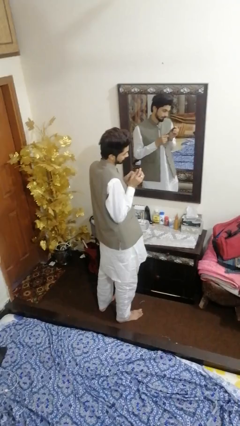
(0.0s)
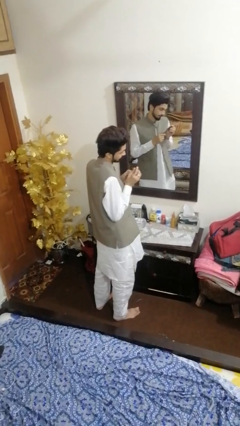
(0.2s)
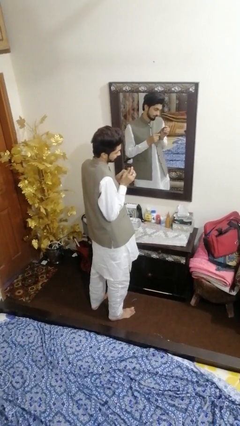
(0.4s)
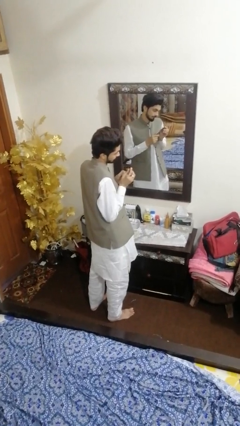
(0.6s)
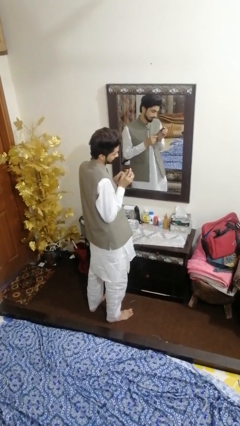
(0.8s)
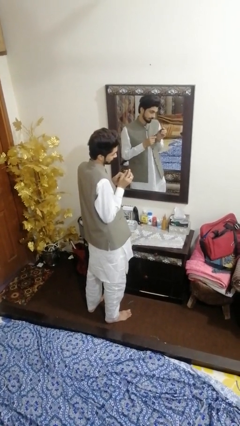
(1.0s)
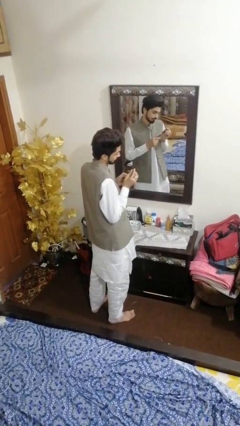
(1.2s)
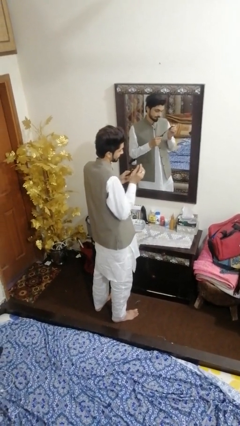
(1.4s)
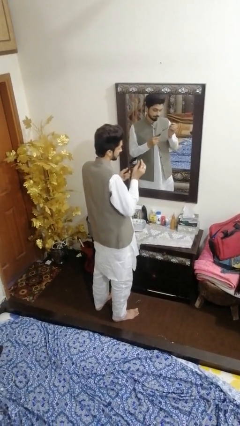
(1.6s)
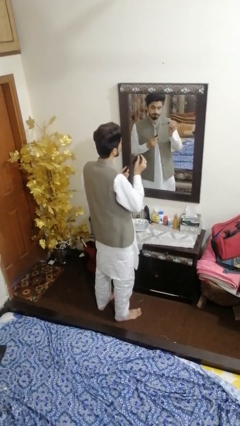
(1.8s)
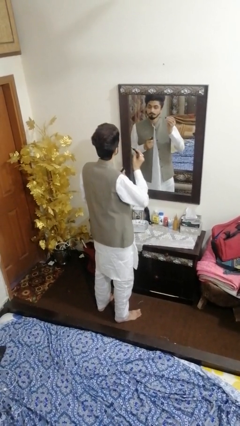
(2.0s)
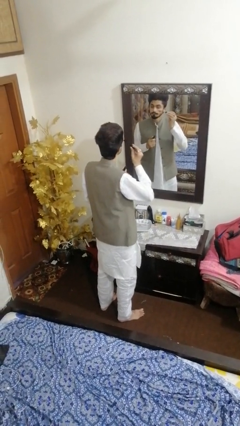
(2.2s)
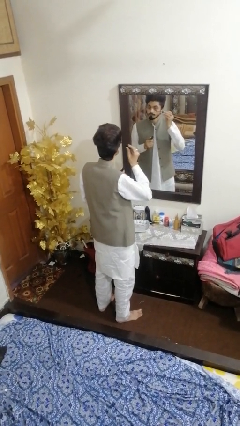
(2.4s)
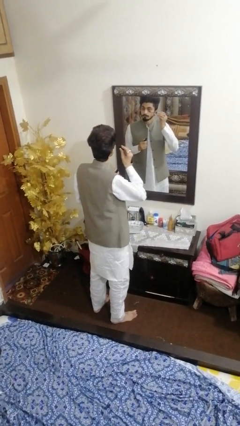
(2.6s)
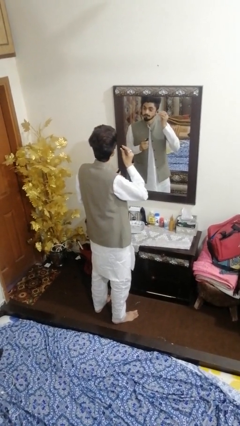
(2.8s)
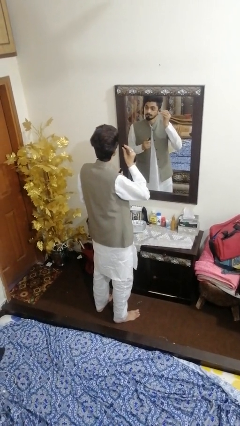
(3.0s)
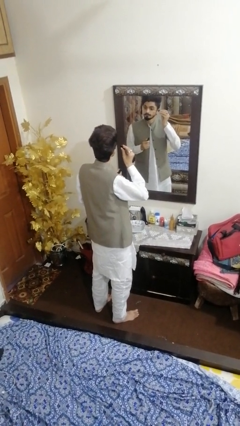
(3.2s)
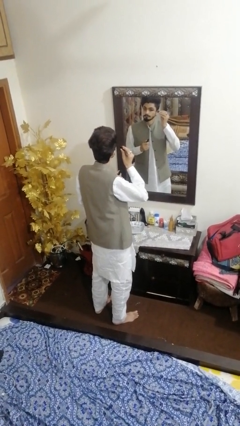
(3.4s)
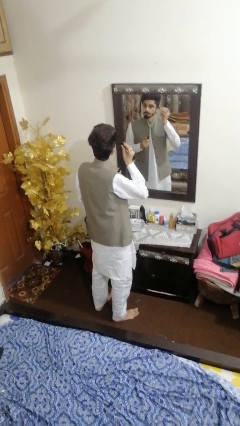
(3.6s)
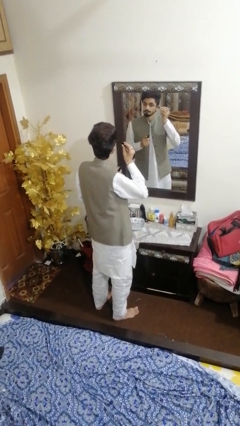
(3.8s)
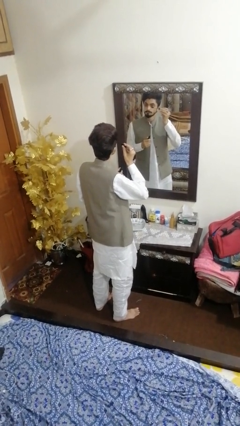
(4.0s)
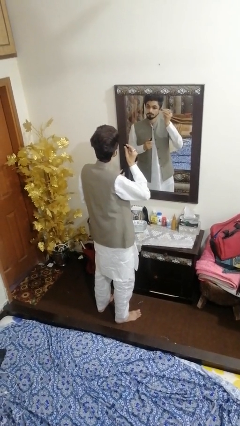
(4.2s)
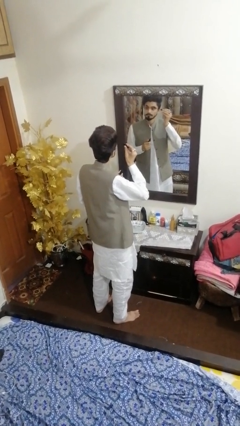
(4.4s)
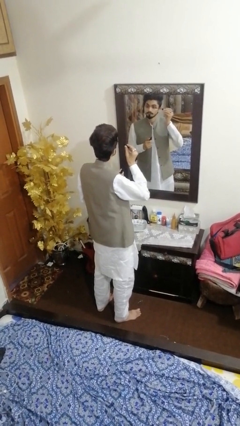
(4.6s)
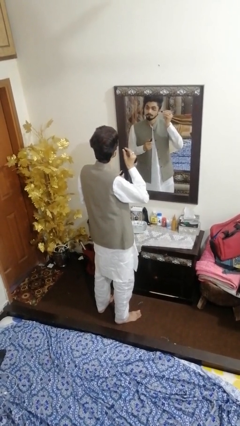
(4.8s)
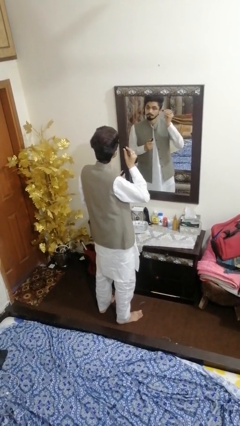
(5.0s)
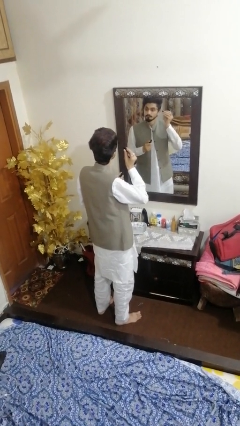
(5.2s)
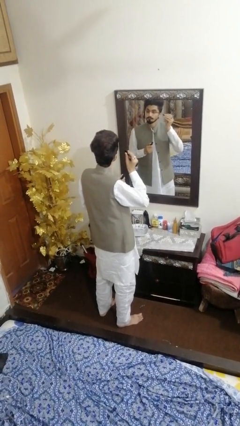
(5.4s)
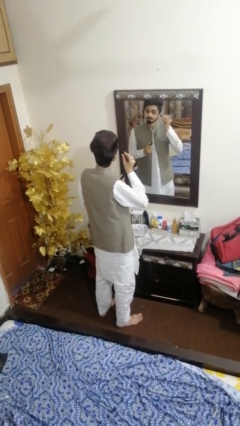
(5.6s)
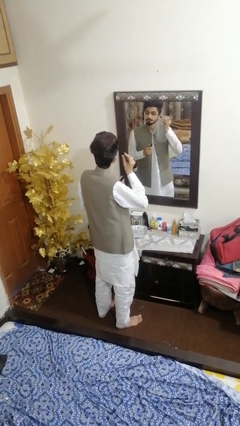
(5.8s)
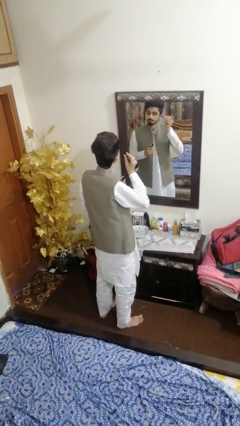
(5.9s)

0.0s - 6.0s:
person applies eye makeup

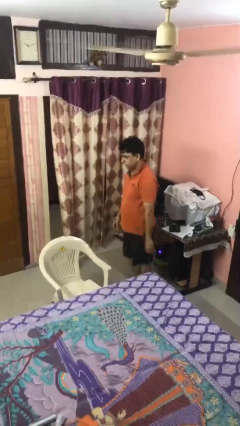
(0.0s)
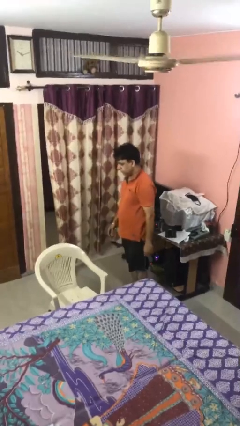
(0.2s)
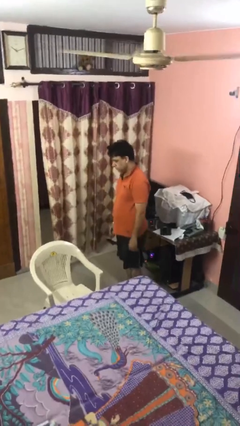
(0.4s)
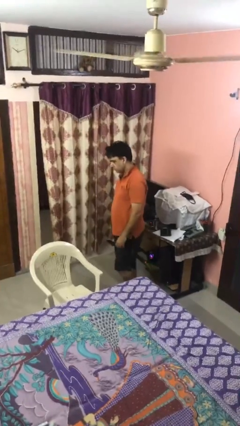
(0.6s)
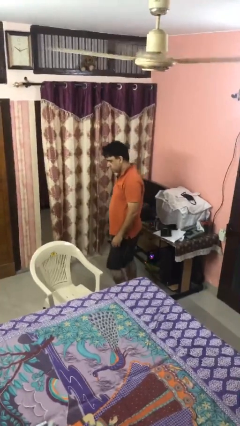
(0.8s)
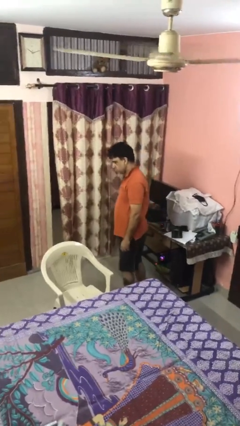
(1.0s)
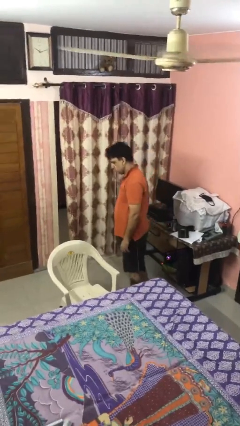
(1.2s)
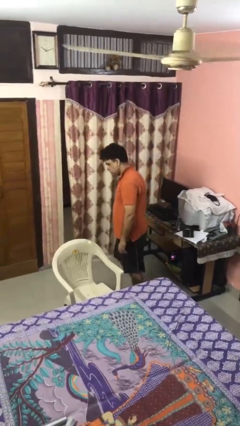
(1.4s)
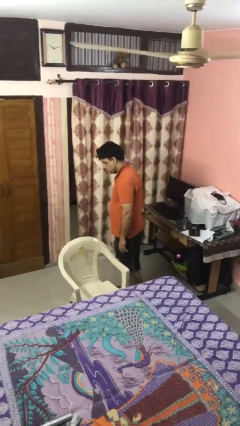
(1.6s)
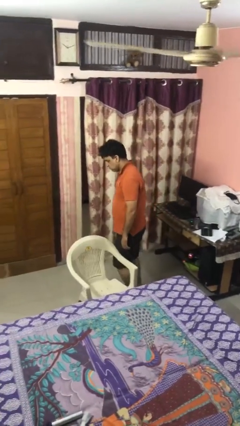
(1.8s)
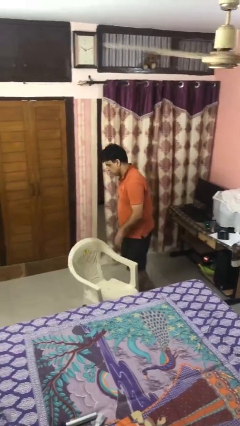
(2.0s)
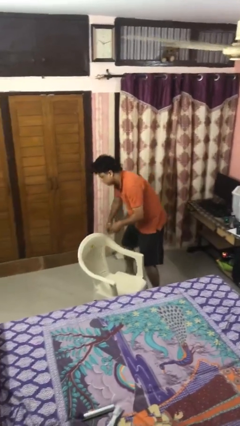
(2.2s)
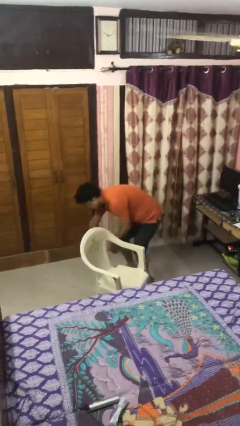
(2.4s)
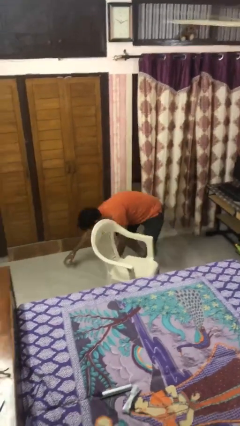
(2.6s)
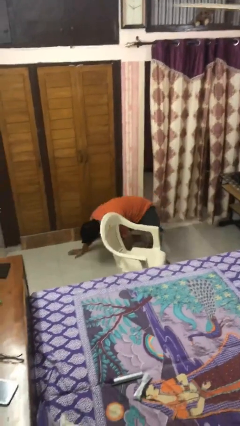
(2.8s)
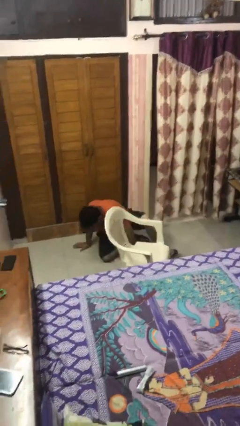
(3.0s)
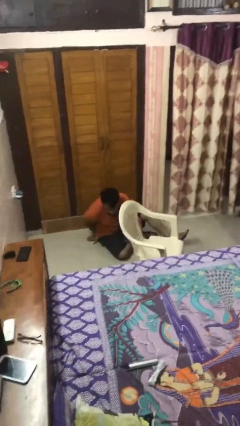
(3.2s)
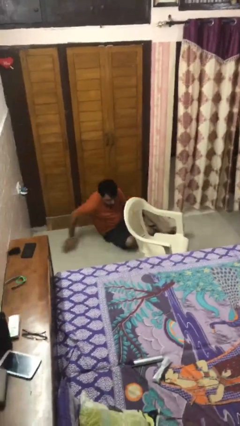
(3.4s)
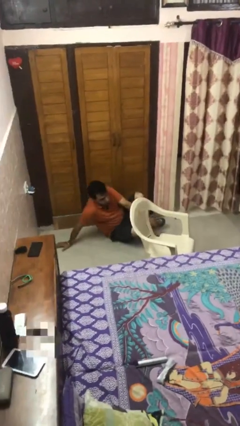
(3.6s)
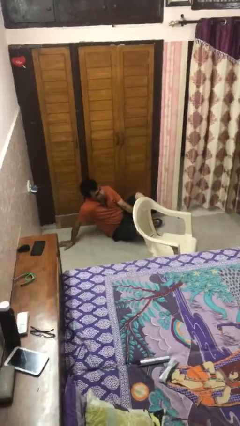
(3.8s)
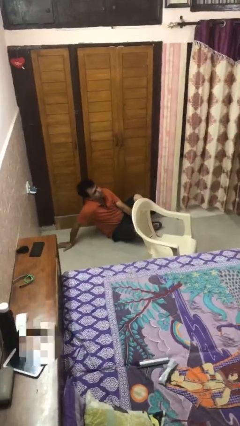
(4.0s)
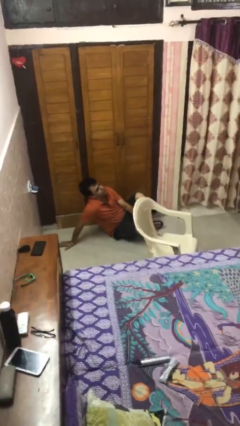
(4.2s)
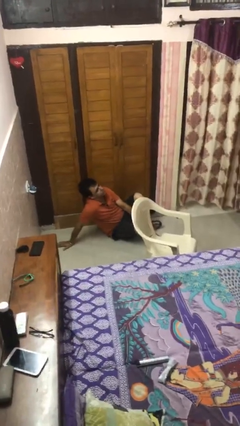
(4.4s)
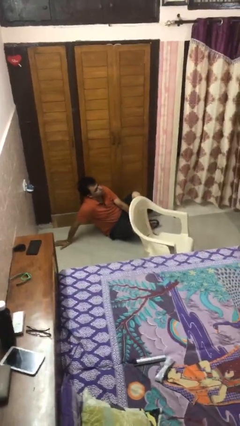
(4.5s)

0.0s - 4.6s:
person trips on object on floor

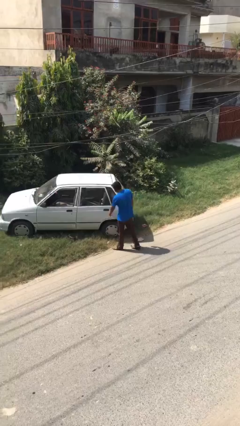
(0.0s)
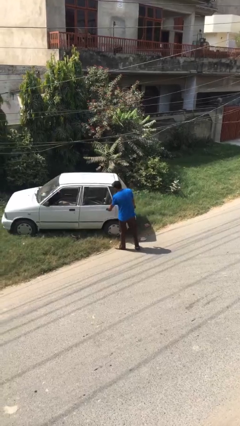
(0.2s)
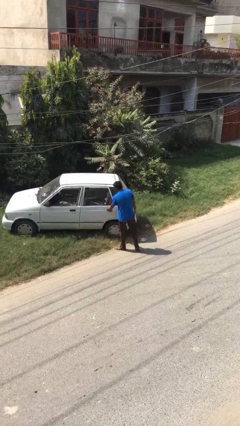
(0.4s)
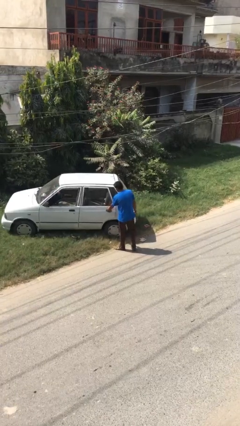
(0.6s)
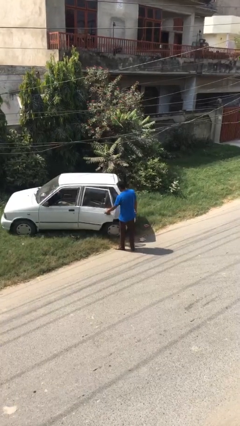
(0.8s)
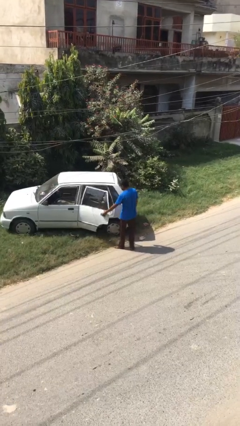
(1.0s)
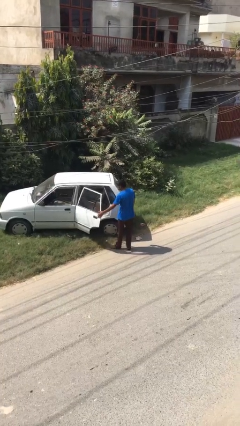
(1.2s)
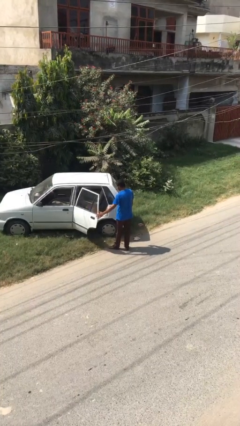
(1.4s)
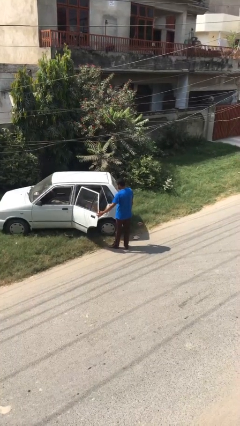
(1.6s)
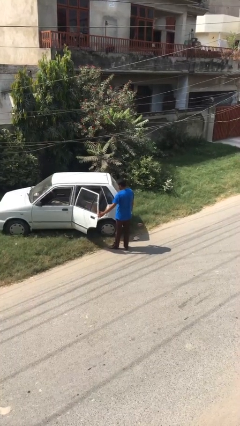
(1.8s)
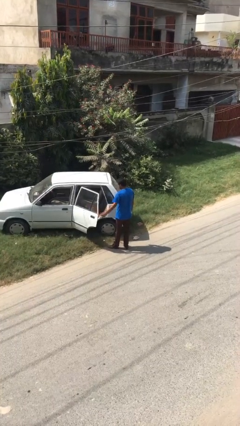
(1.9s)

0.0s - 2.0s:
person opens car door

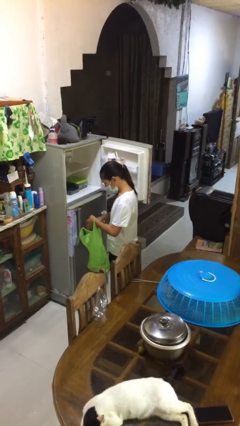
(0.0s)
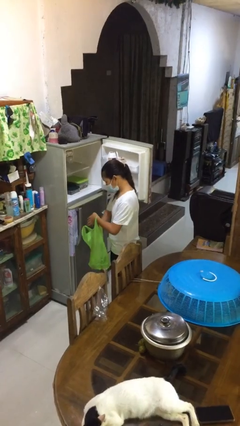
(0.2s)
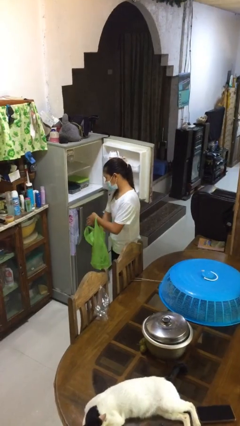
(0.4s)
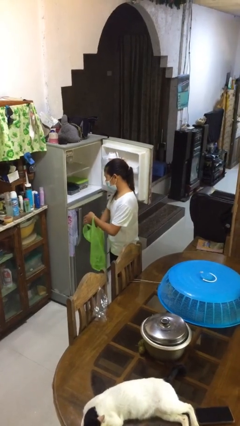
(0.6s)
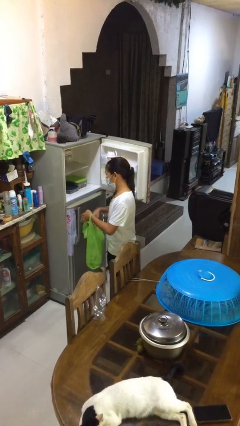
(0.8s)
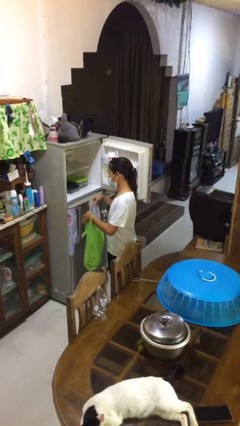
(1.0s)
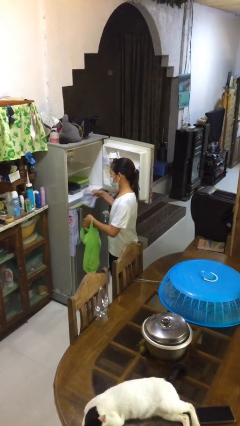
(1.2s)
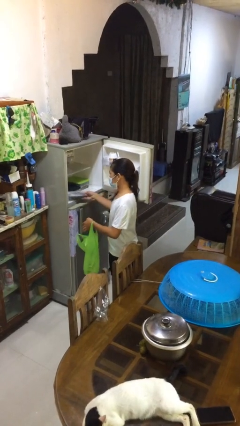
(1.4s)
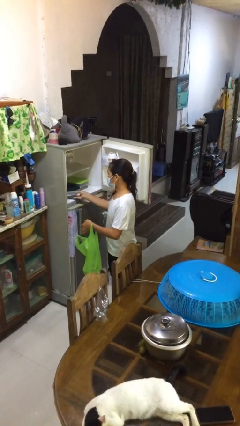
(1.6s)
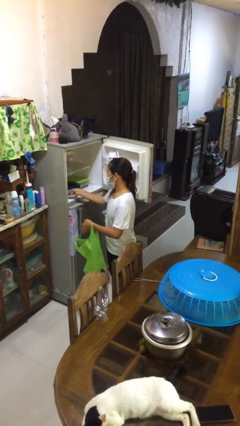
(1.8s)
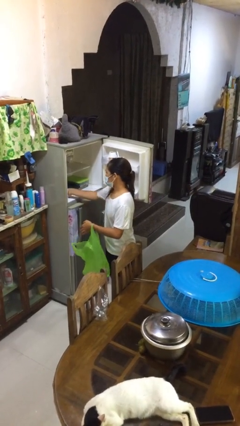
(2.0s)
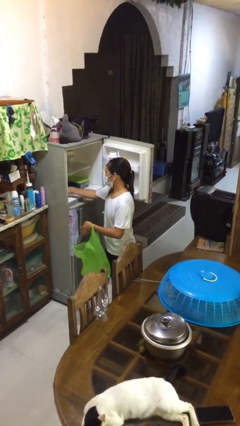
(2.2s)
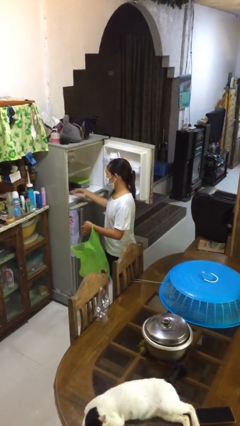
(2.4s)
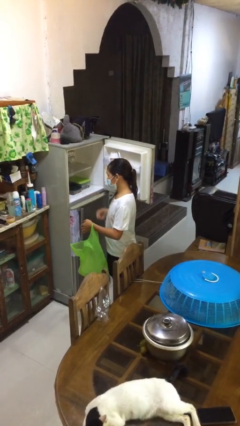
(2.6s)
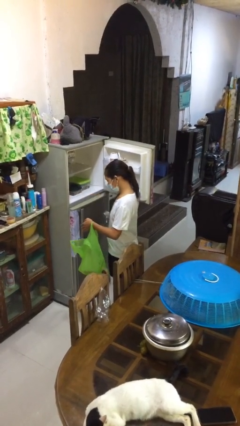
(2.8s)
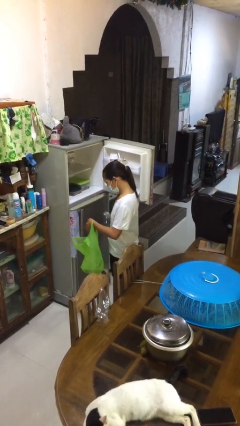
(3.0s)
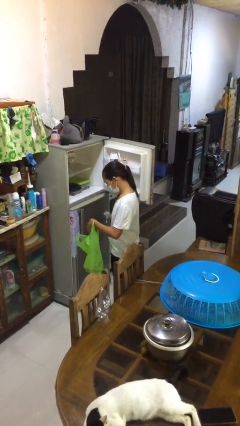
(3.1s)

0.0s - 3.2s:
person loads groceries into refrigerator

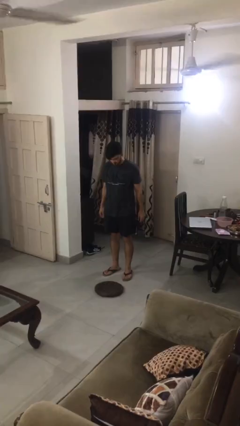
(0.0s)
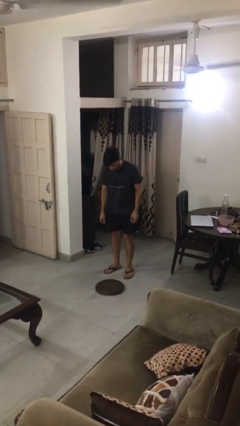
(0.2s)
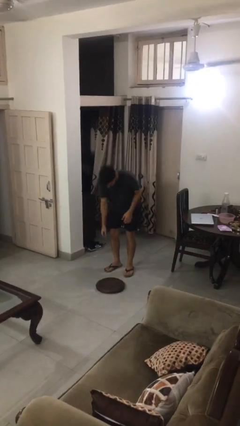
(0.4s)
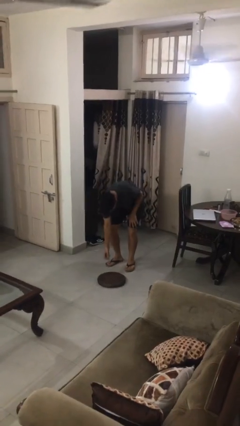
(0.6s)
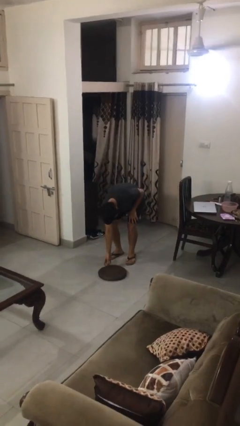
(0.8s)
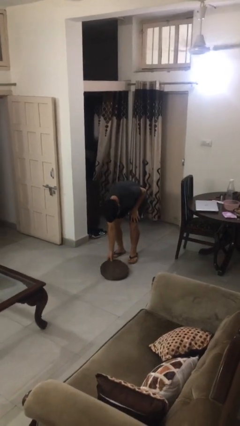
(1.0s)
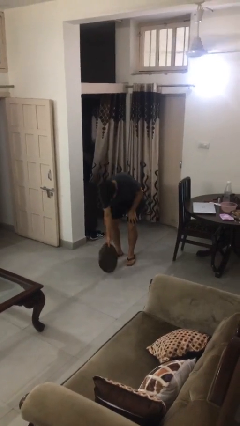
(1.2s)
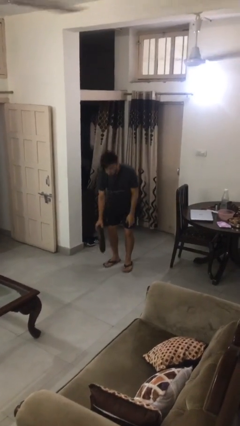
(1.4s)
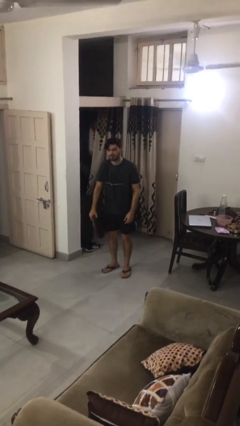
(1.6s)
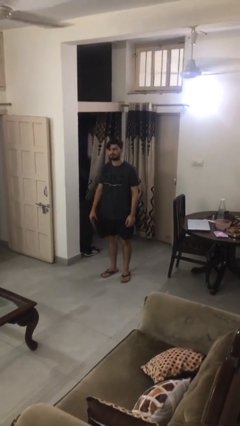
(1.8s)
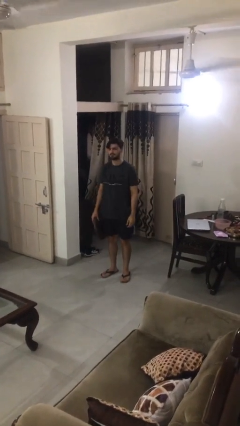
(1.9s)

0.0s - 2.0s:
person picks up object from floor
